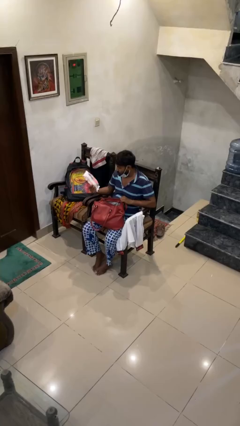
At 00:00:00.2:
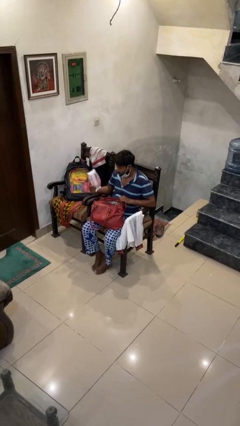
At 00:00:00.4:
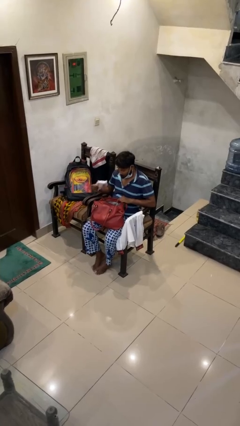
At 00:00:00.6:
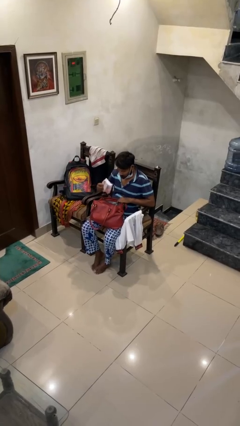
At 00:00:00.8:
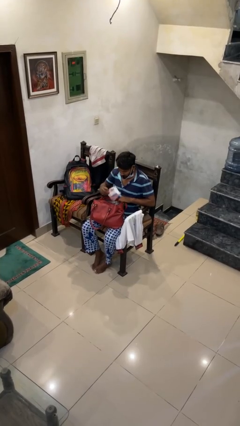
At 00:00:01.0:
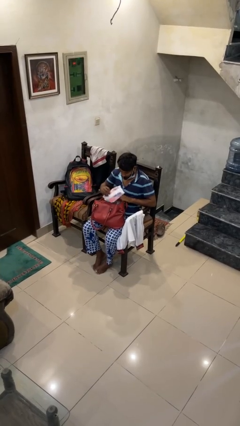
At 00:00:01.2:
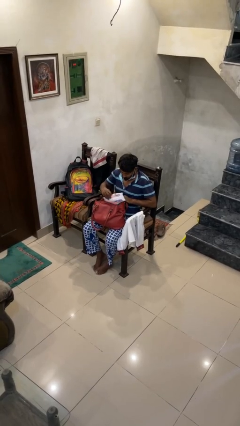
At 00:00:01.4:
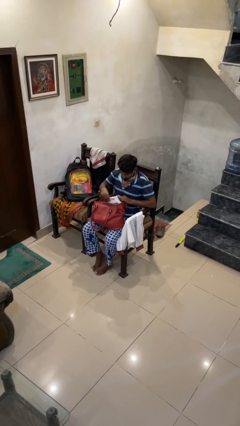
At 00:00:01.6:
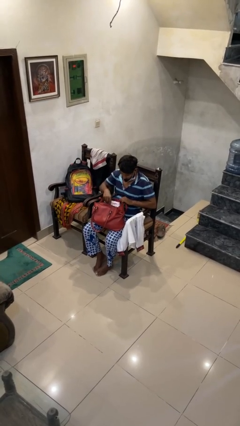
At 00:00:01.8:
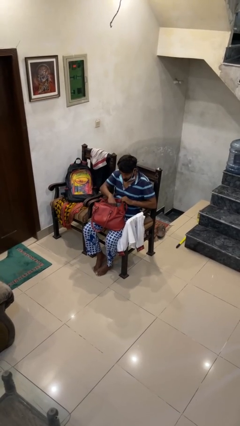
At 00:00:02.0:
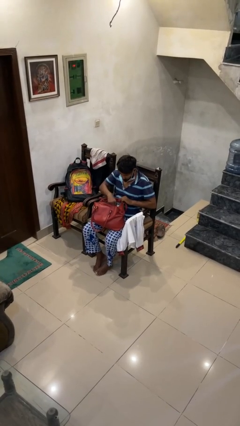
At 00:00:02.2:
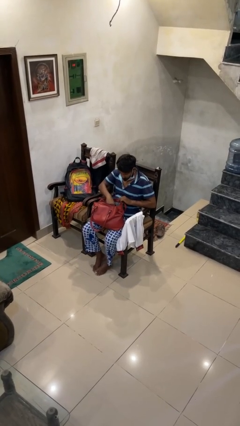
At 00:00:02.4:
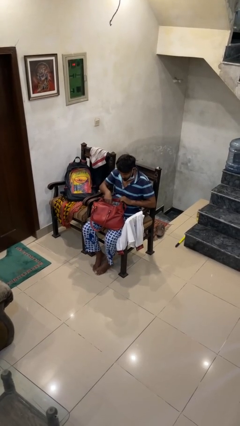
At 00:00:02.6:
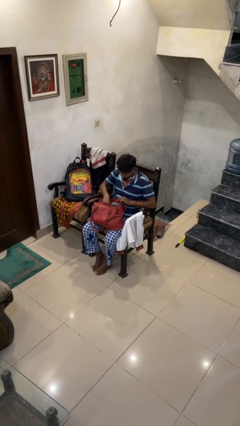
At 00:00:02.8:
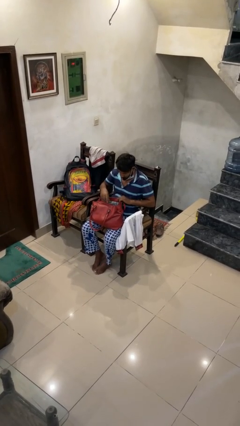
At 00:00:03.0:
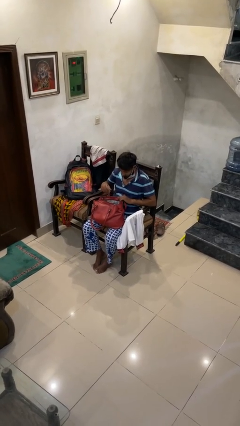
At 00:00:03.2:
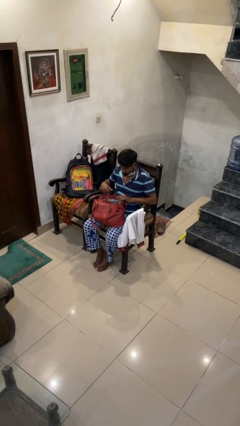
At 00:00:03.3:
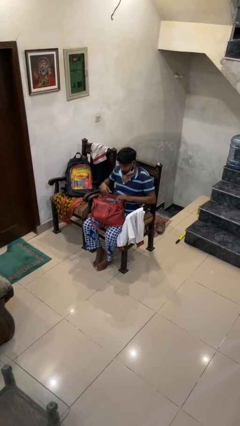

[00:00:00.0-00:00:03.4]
person puts object into purse

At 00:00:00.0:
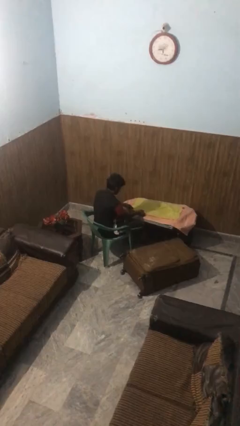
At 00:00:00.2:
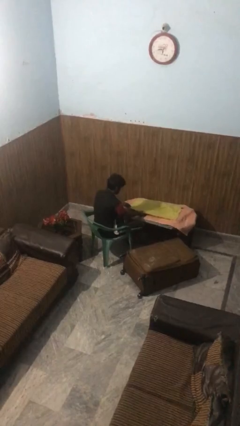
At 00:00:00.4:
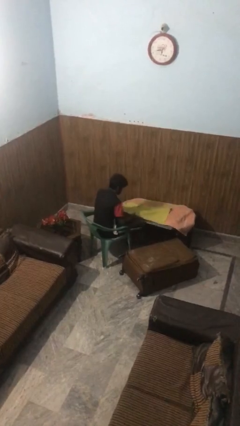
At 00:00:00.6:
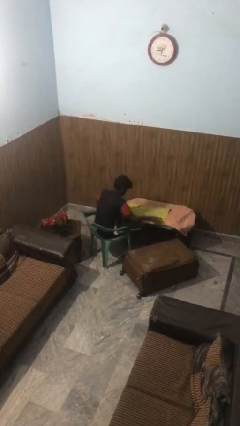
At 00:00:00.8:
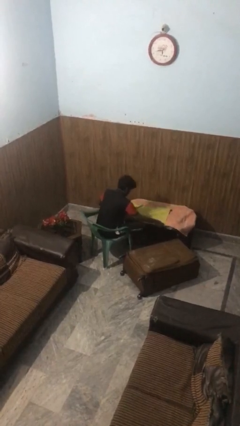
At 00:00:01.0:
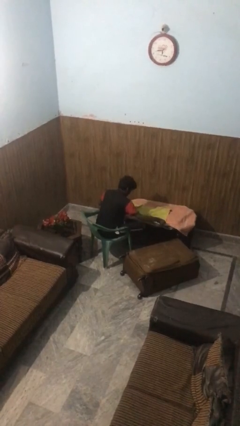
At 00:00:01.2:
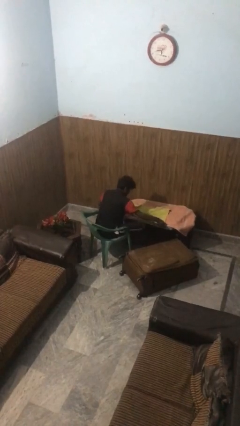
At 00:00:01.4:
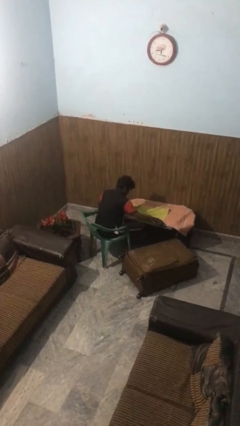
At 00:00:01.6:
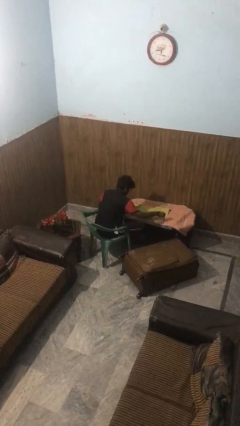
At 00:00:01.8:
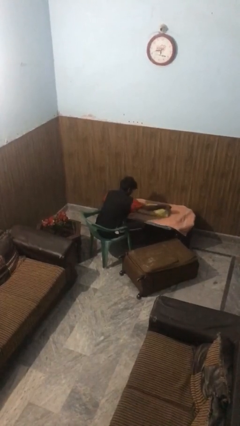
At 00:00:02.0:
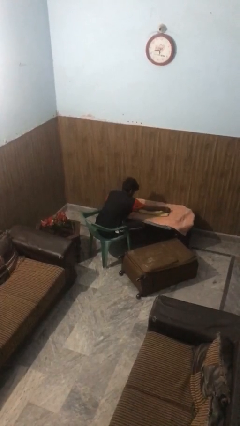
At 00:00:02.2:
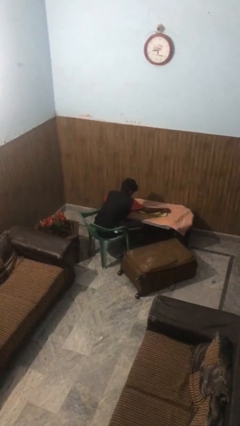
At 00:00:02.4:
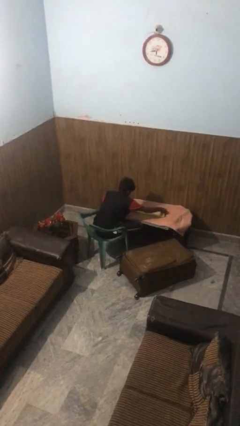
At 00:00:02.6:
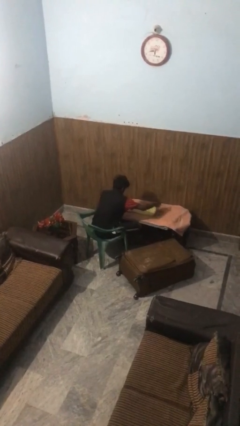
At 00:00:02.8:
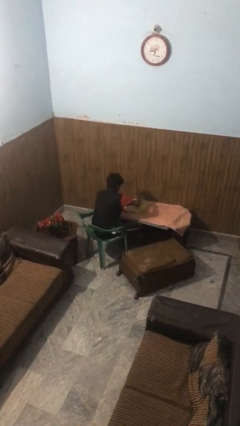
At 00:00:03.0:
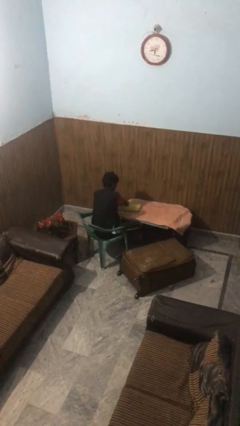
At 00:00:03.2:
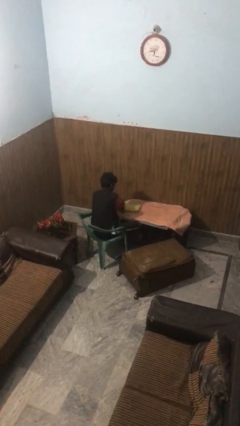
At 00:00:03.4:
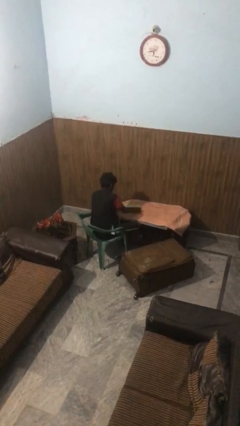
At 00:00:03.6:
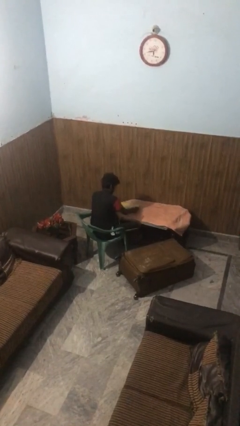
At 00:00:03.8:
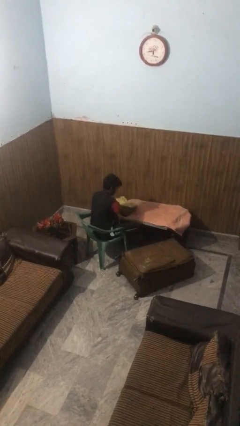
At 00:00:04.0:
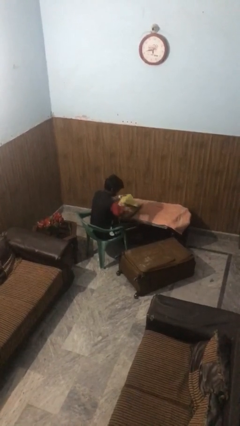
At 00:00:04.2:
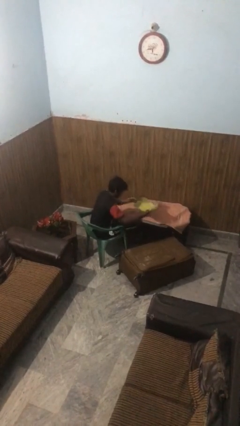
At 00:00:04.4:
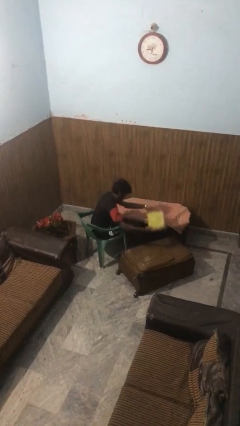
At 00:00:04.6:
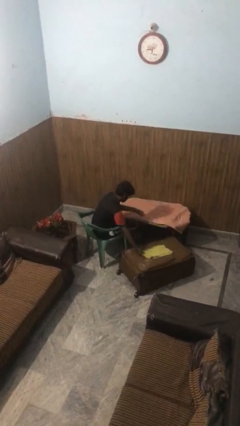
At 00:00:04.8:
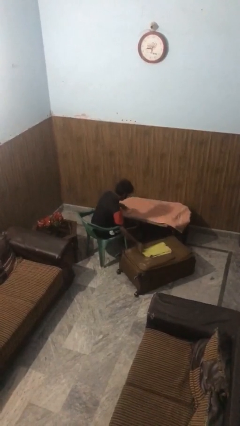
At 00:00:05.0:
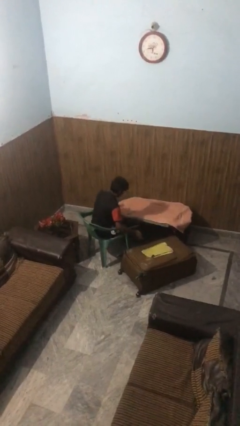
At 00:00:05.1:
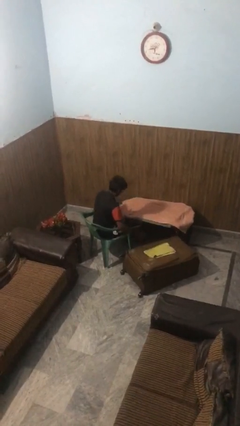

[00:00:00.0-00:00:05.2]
person folds towel

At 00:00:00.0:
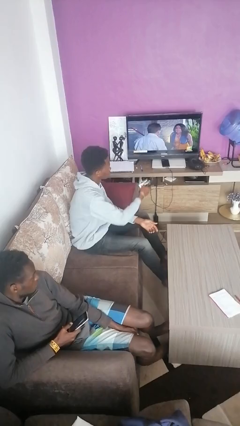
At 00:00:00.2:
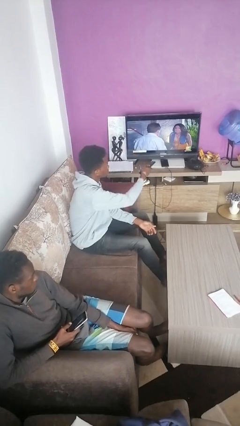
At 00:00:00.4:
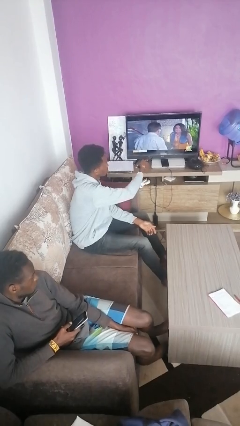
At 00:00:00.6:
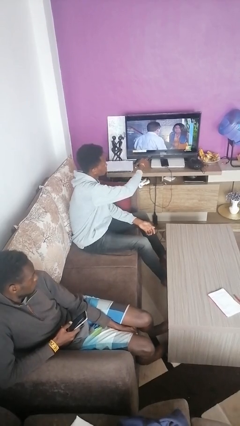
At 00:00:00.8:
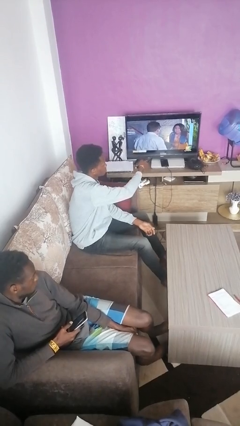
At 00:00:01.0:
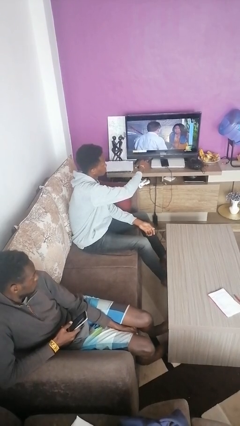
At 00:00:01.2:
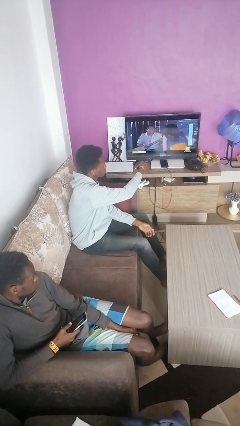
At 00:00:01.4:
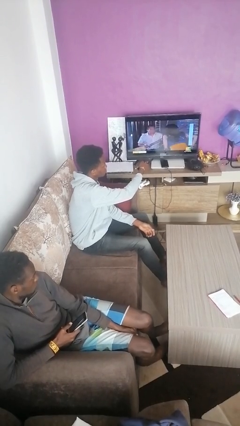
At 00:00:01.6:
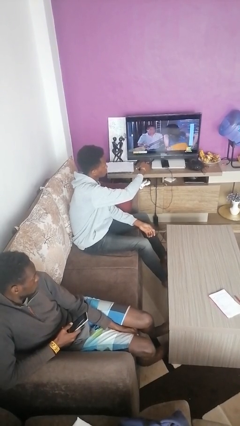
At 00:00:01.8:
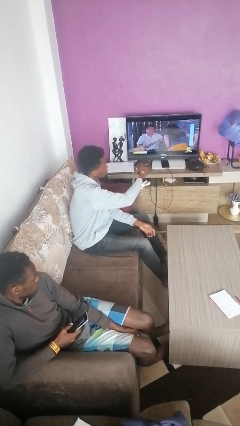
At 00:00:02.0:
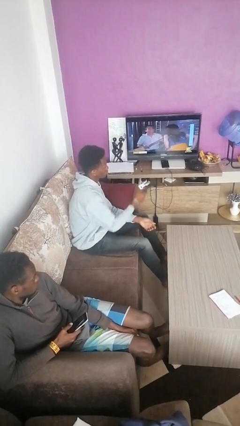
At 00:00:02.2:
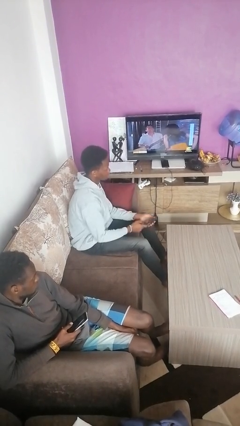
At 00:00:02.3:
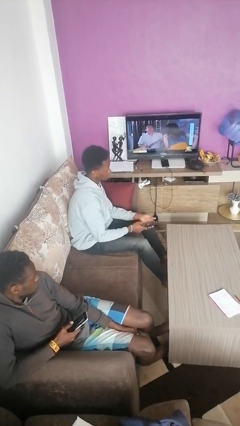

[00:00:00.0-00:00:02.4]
person uses television remote

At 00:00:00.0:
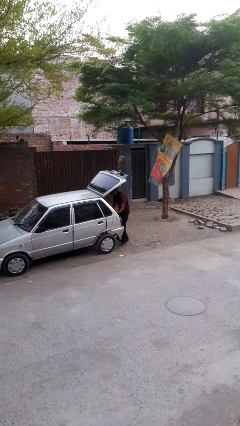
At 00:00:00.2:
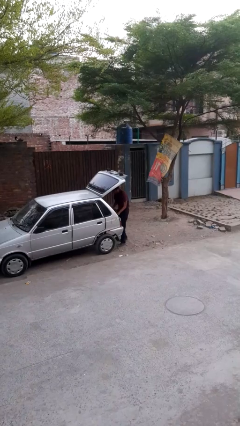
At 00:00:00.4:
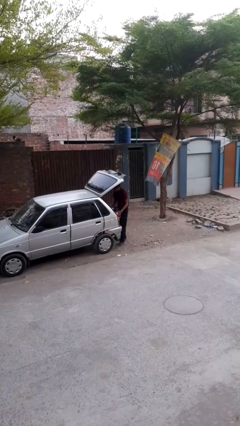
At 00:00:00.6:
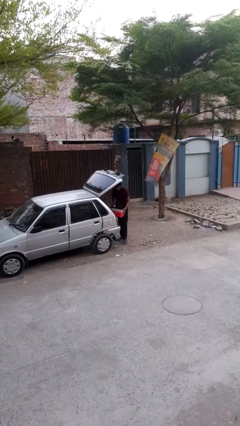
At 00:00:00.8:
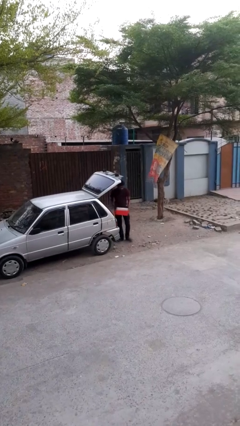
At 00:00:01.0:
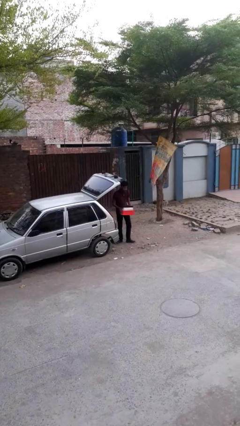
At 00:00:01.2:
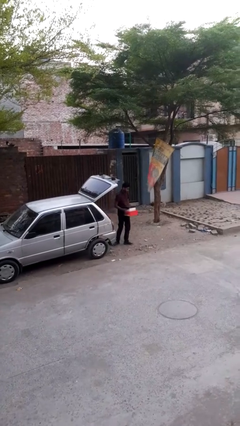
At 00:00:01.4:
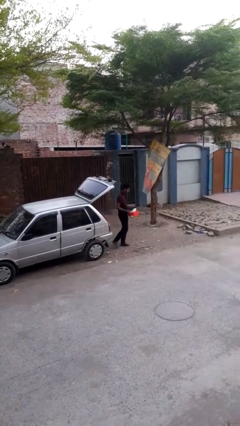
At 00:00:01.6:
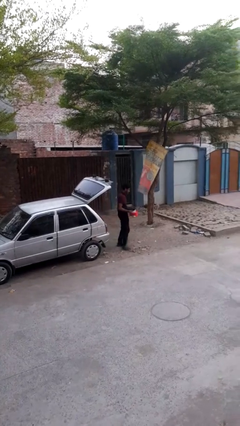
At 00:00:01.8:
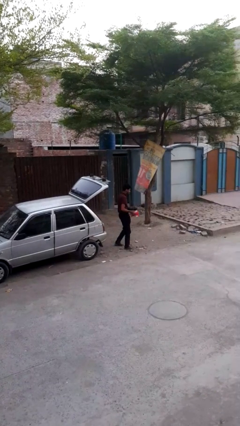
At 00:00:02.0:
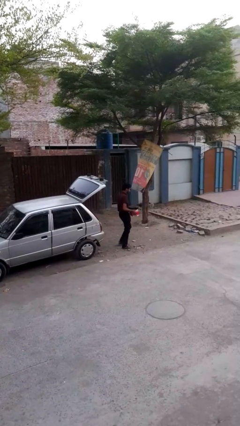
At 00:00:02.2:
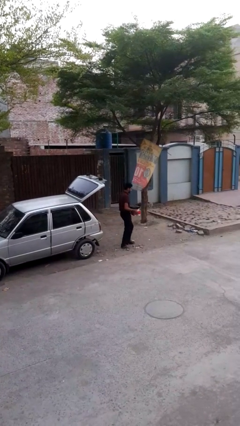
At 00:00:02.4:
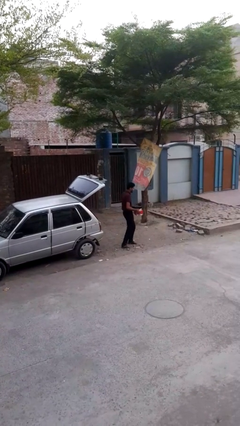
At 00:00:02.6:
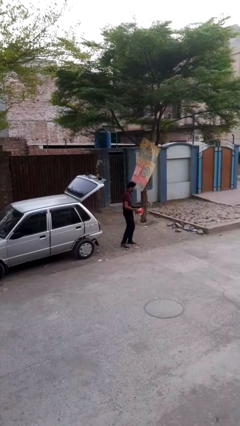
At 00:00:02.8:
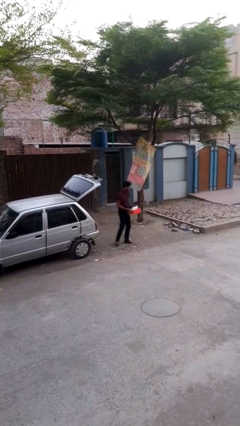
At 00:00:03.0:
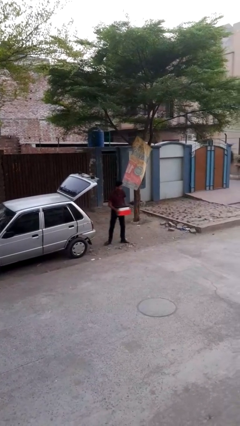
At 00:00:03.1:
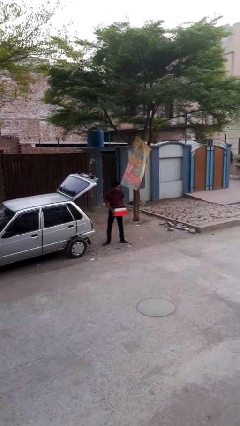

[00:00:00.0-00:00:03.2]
person unloads car

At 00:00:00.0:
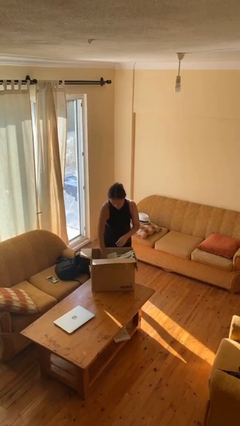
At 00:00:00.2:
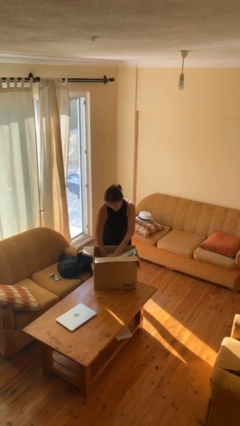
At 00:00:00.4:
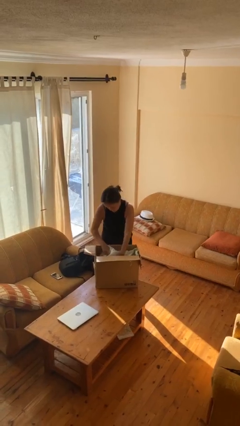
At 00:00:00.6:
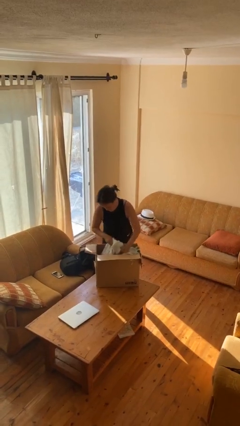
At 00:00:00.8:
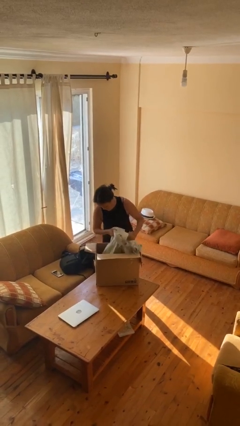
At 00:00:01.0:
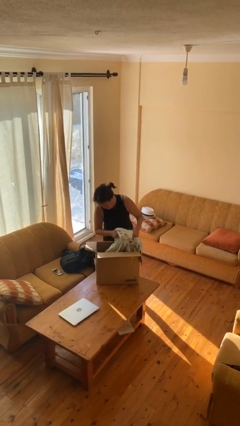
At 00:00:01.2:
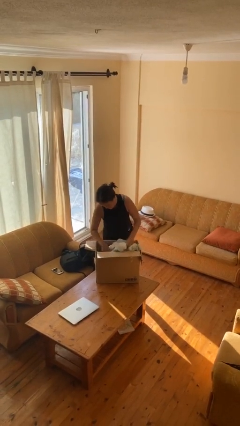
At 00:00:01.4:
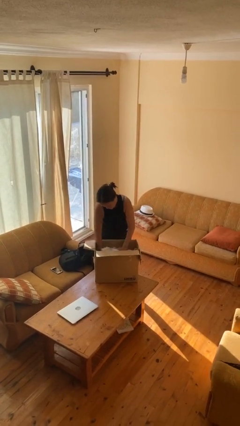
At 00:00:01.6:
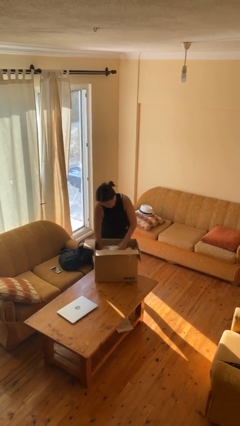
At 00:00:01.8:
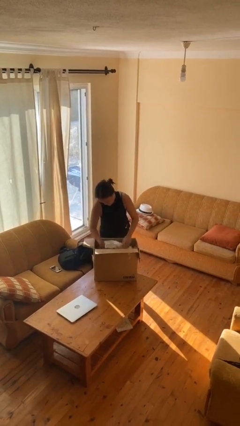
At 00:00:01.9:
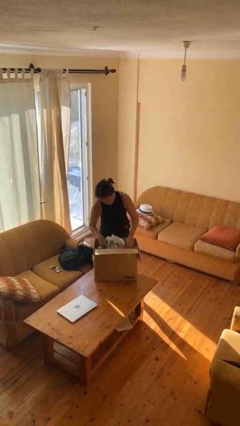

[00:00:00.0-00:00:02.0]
person searches in box

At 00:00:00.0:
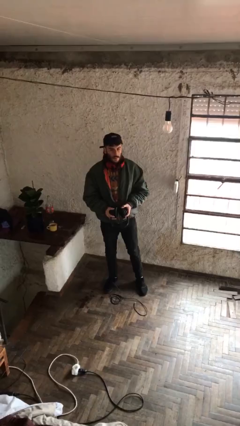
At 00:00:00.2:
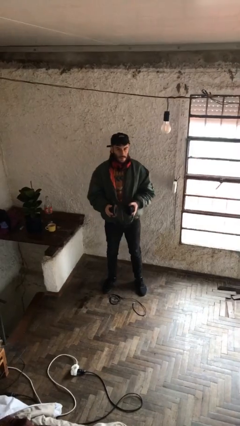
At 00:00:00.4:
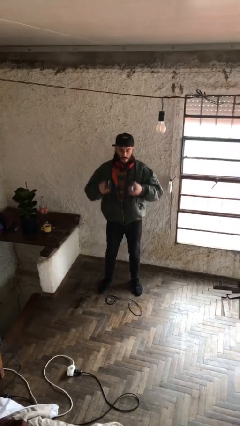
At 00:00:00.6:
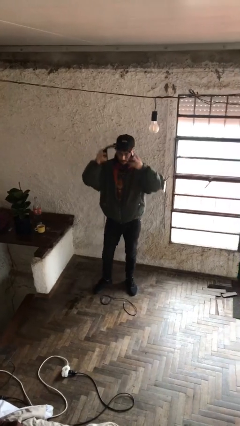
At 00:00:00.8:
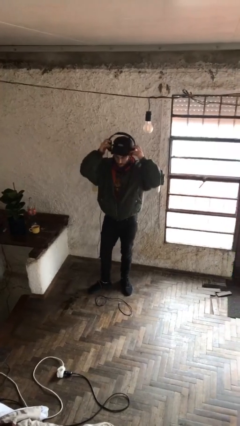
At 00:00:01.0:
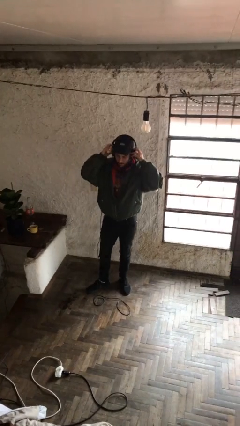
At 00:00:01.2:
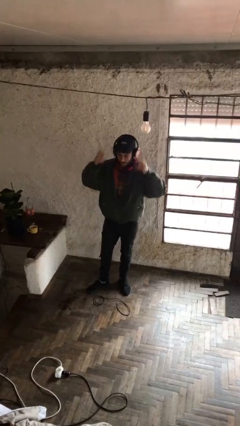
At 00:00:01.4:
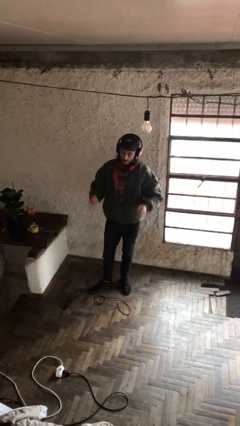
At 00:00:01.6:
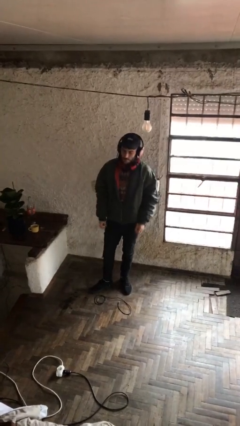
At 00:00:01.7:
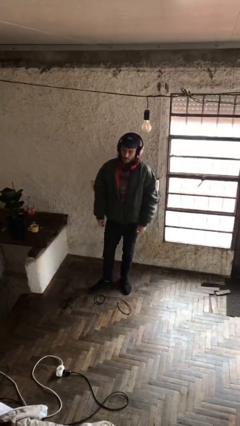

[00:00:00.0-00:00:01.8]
person puts on headphones
